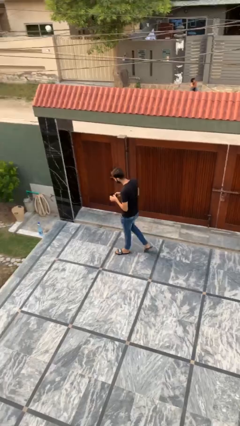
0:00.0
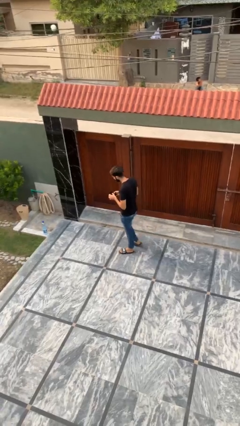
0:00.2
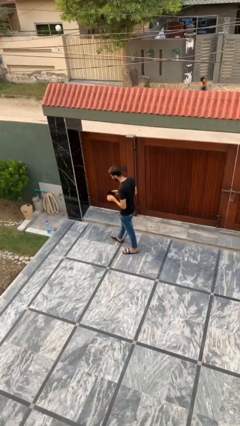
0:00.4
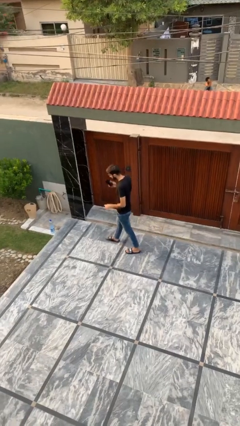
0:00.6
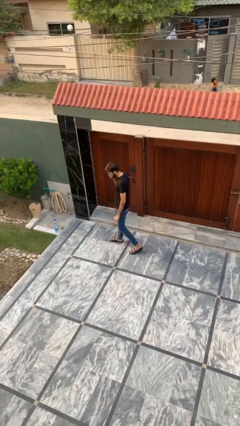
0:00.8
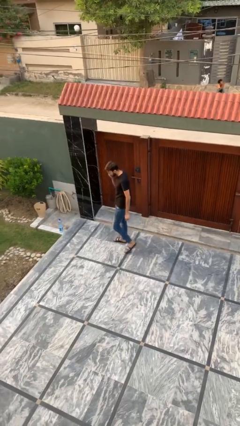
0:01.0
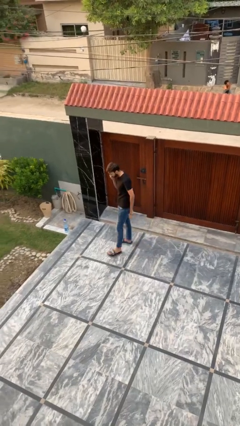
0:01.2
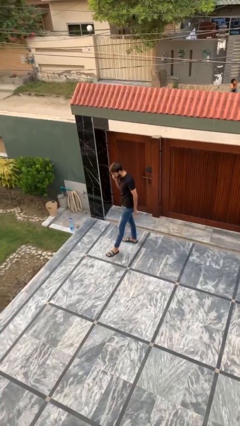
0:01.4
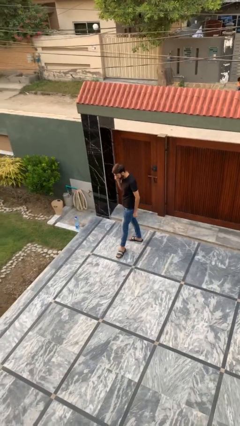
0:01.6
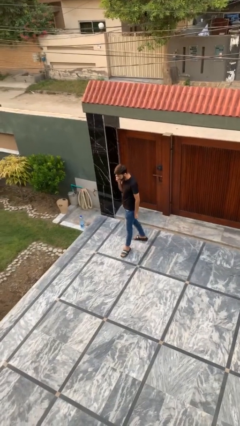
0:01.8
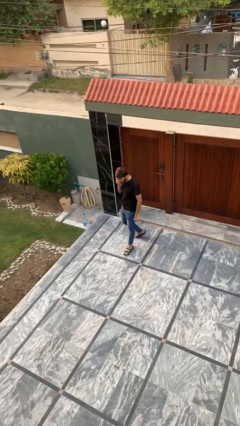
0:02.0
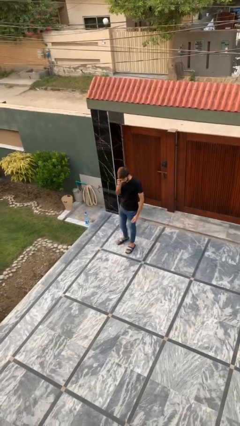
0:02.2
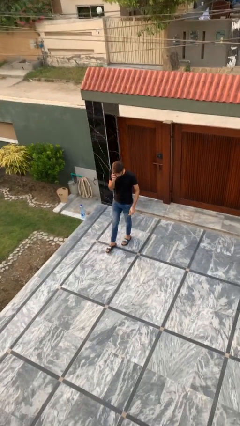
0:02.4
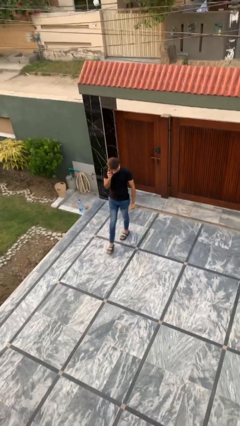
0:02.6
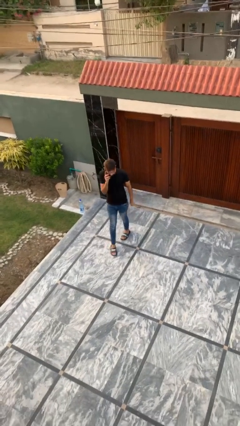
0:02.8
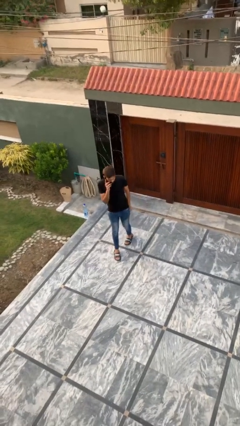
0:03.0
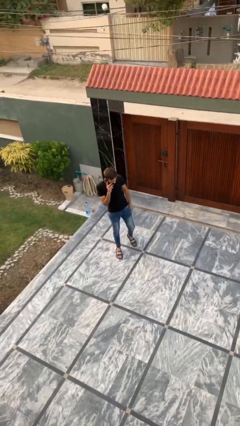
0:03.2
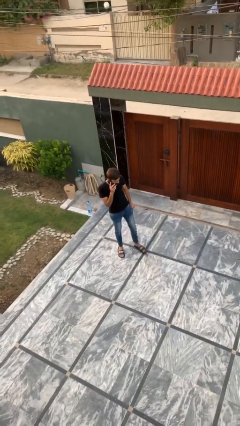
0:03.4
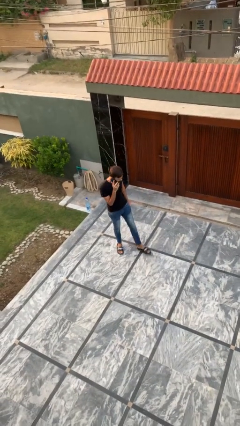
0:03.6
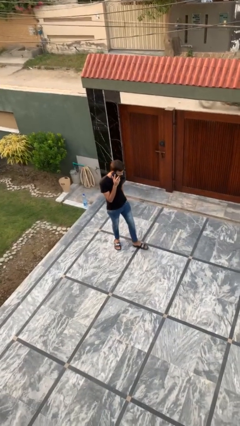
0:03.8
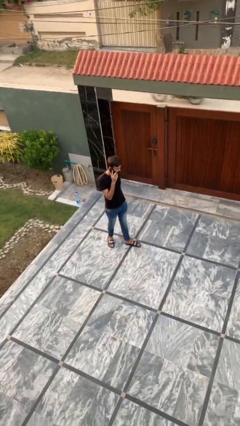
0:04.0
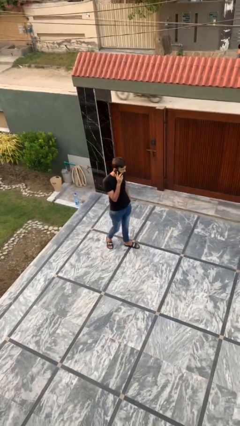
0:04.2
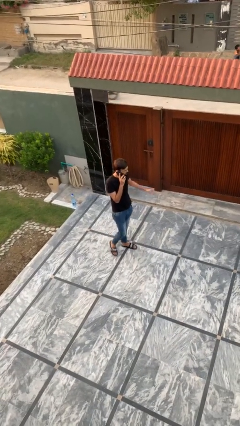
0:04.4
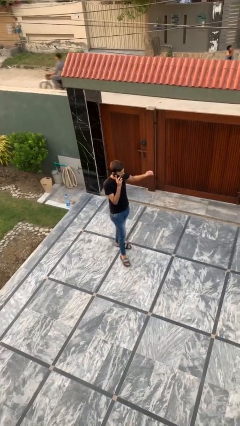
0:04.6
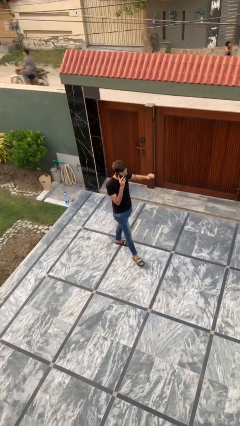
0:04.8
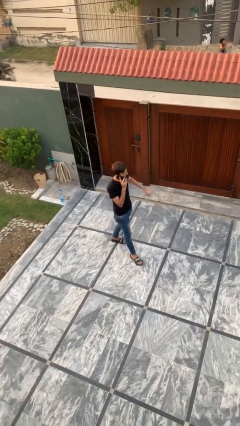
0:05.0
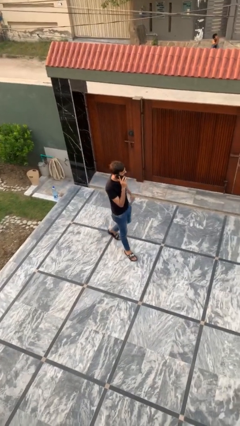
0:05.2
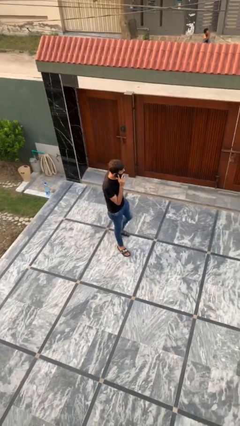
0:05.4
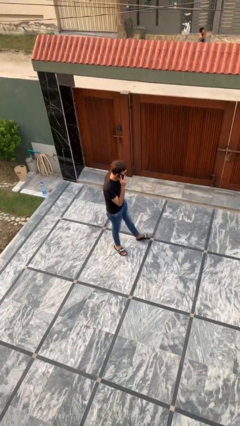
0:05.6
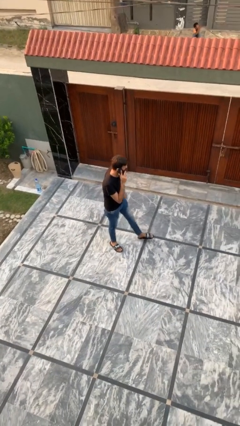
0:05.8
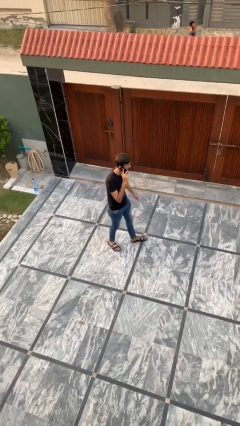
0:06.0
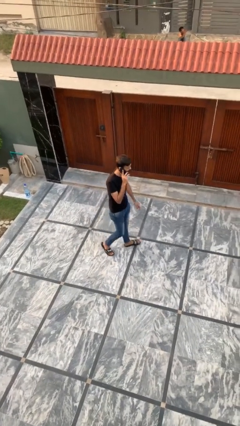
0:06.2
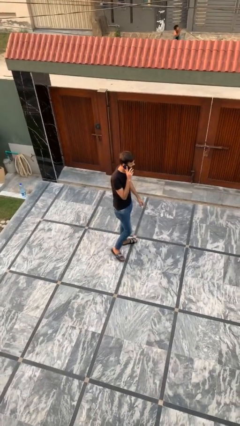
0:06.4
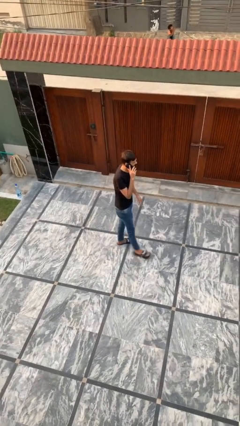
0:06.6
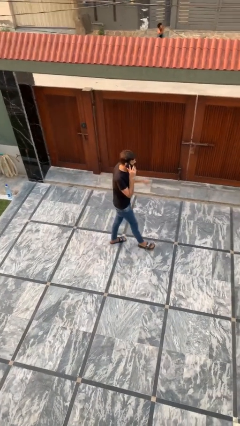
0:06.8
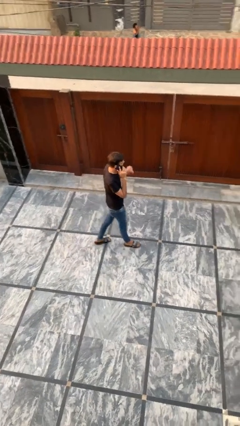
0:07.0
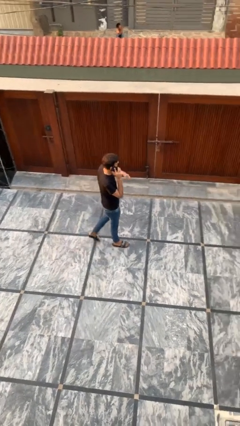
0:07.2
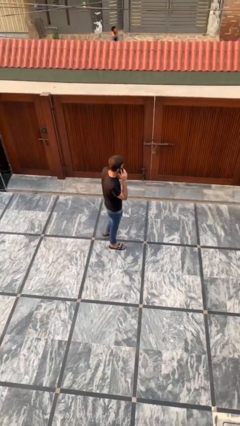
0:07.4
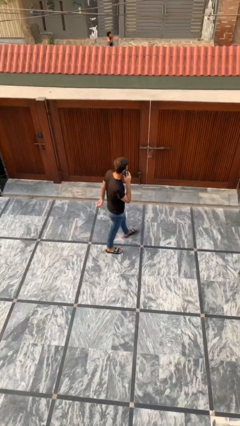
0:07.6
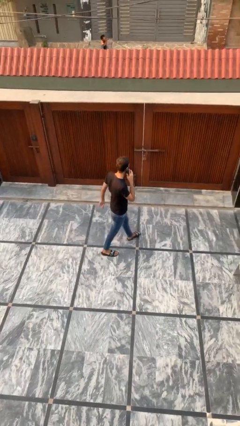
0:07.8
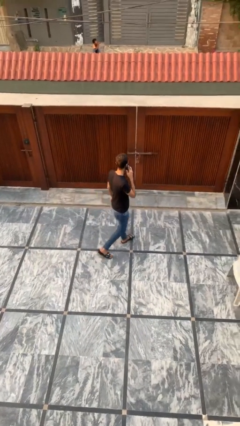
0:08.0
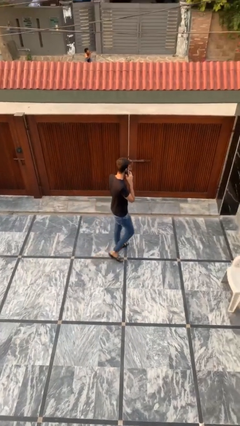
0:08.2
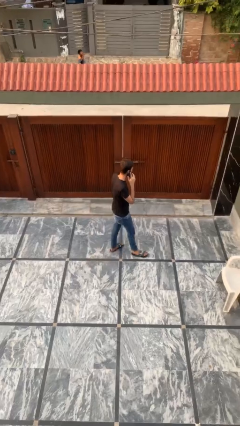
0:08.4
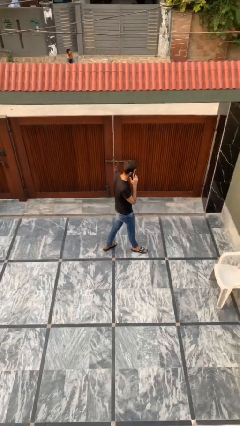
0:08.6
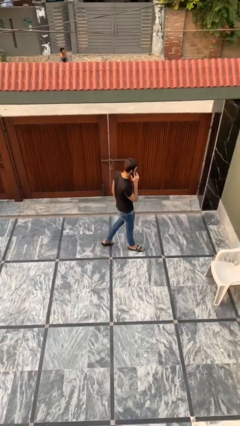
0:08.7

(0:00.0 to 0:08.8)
person talks on phone

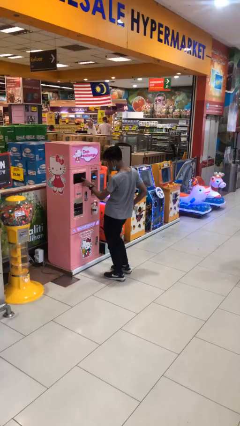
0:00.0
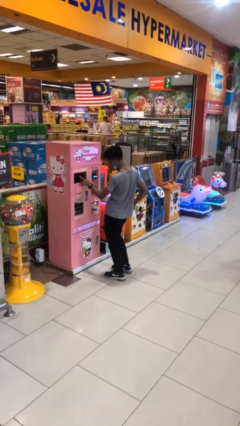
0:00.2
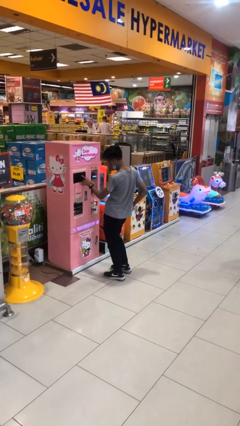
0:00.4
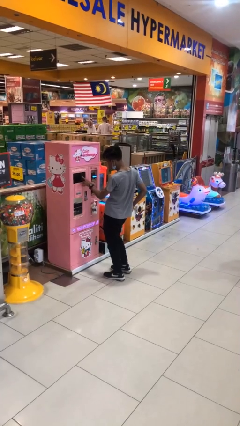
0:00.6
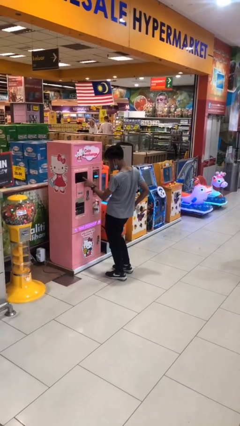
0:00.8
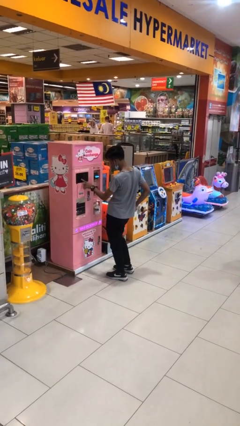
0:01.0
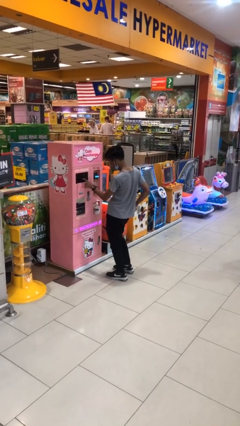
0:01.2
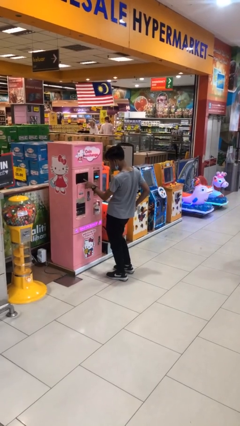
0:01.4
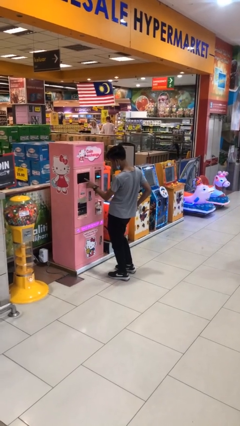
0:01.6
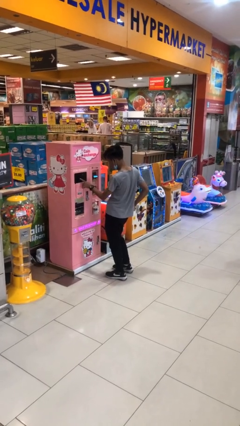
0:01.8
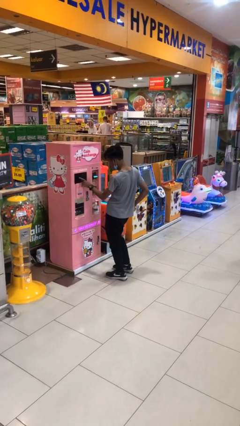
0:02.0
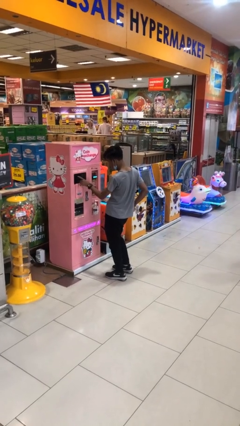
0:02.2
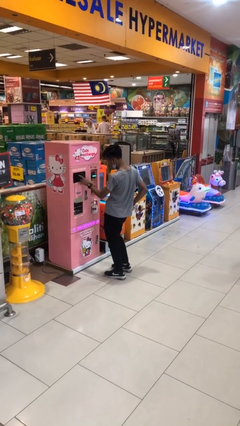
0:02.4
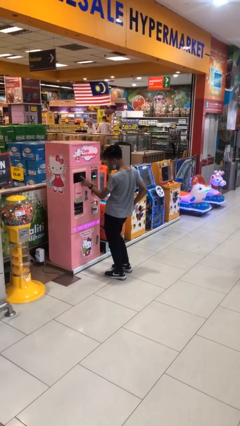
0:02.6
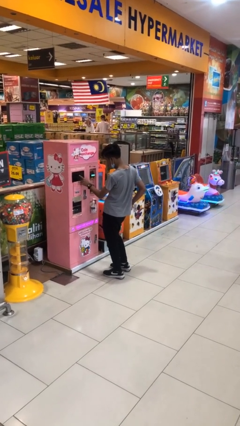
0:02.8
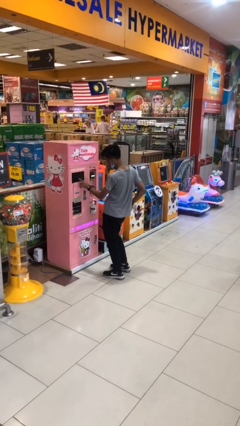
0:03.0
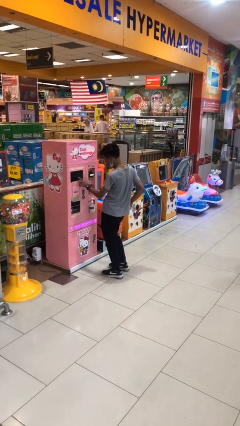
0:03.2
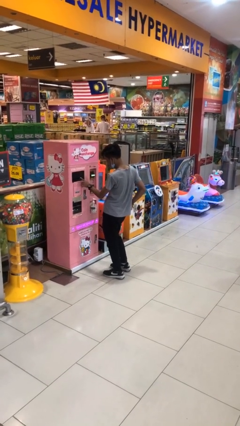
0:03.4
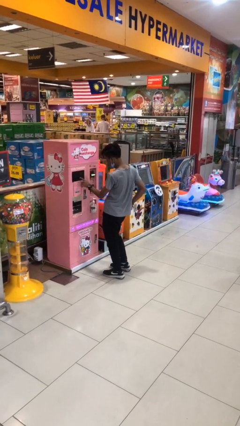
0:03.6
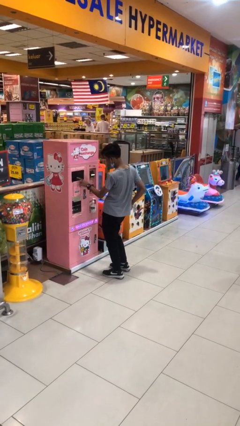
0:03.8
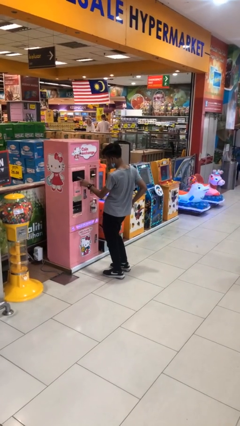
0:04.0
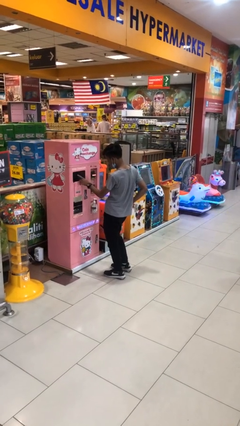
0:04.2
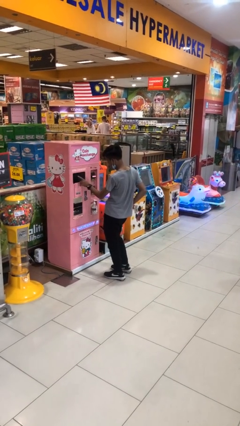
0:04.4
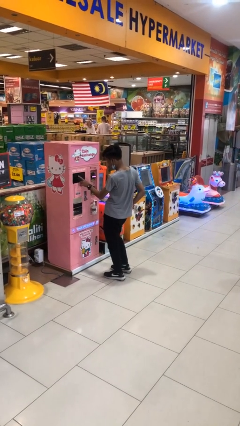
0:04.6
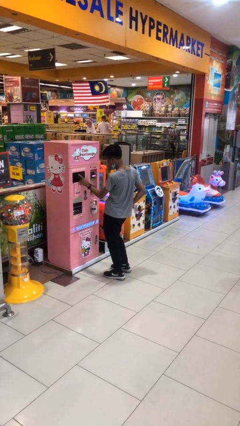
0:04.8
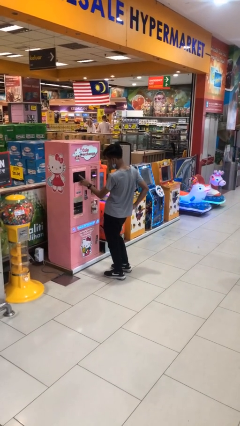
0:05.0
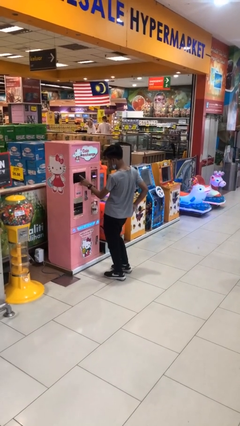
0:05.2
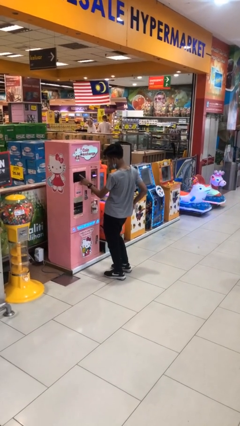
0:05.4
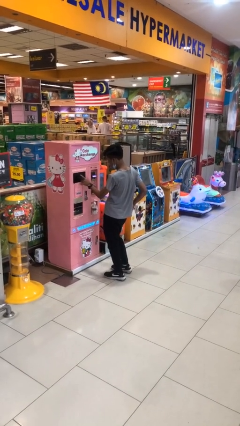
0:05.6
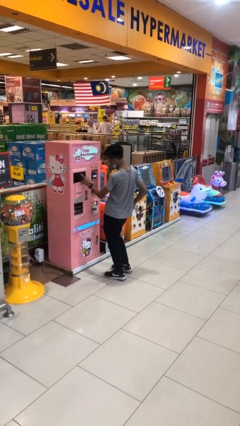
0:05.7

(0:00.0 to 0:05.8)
person purchases from machine

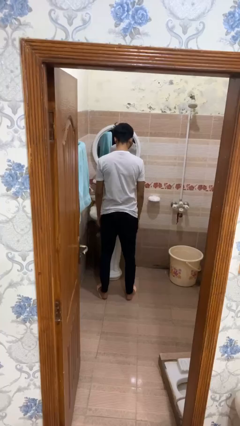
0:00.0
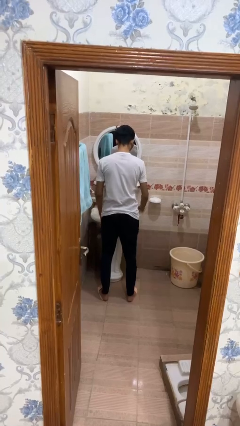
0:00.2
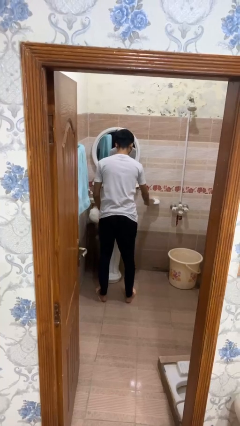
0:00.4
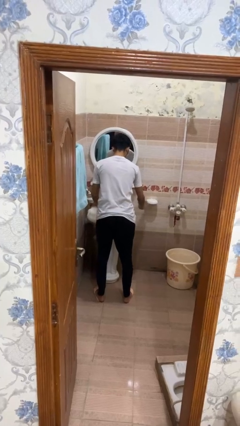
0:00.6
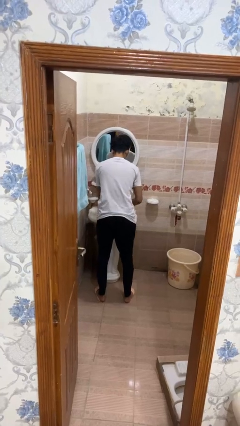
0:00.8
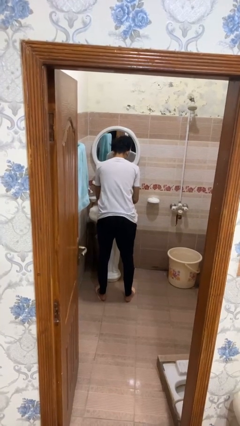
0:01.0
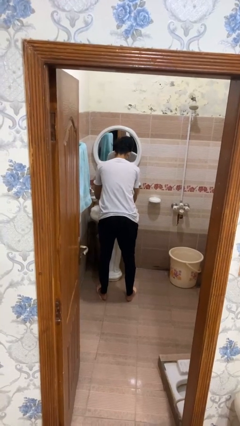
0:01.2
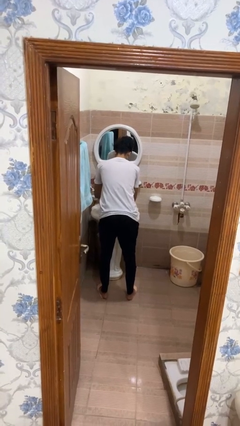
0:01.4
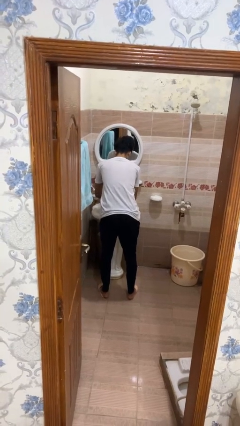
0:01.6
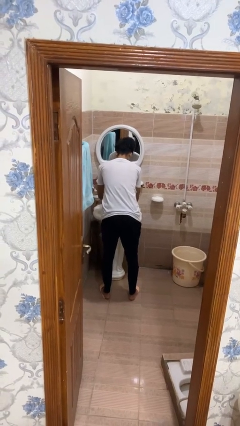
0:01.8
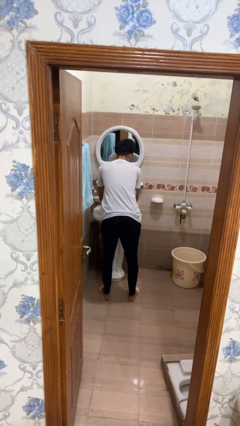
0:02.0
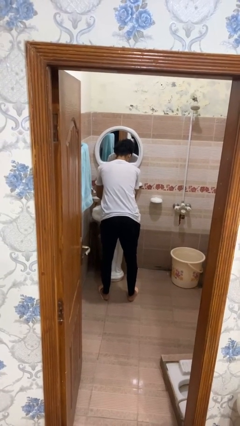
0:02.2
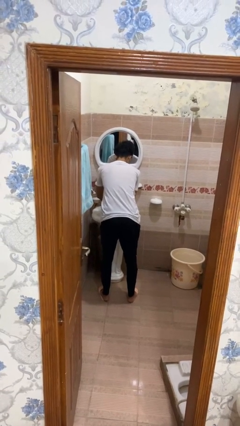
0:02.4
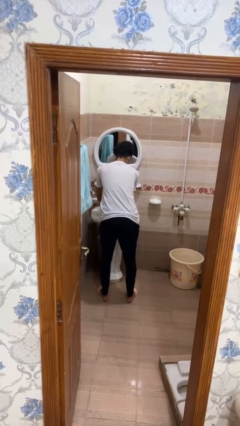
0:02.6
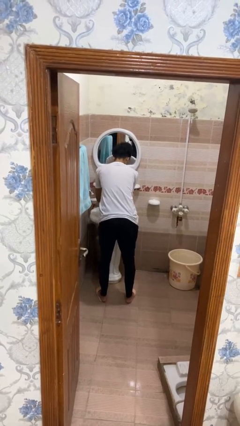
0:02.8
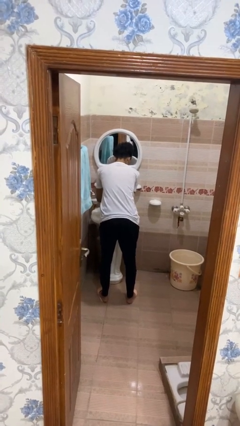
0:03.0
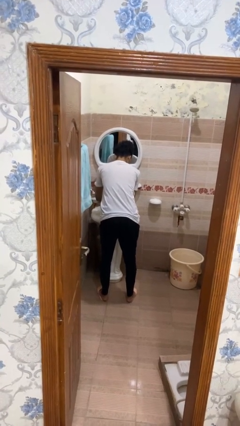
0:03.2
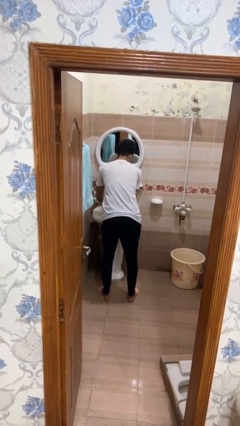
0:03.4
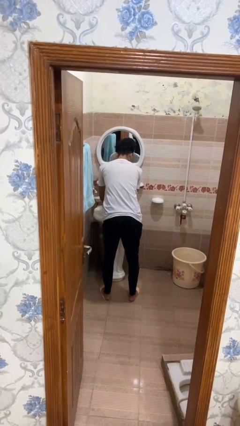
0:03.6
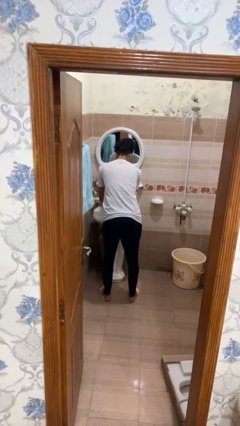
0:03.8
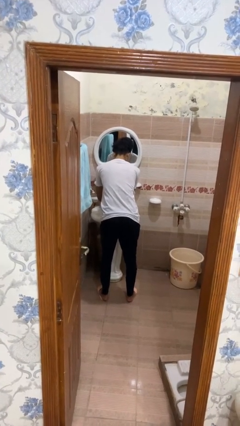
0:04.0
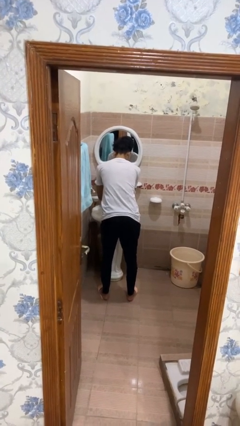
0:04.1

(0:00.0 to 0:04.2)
person washes hands
